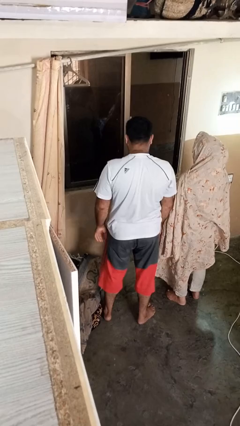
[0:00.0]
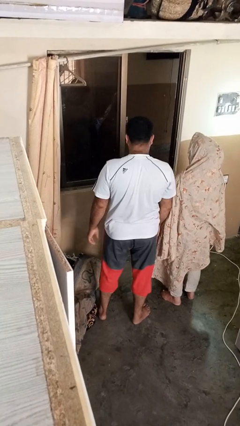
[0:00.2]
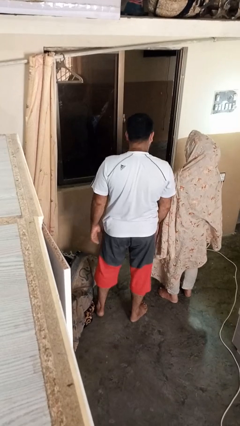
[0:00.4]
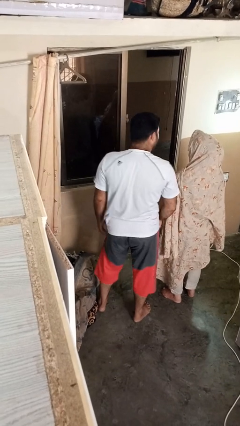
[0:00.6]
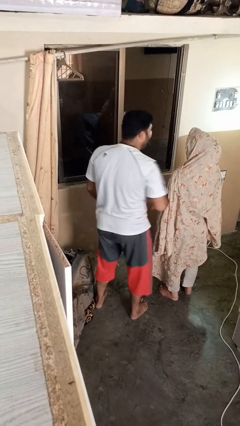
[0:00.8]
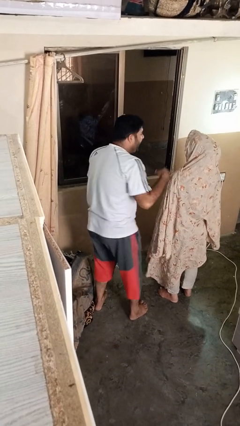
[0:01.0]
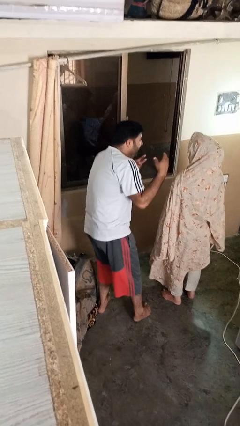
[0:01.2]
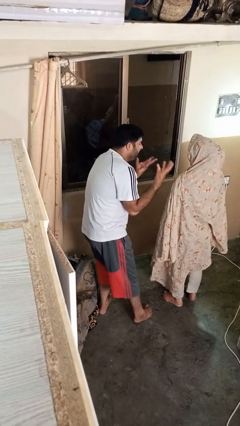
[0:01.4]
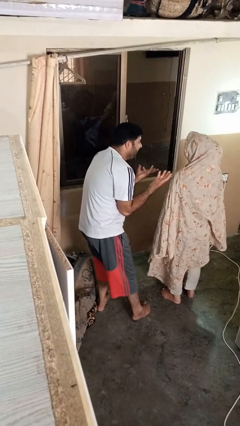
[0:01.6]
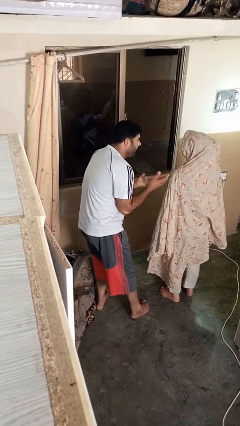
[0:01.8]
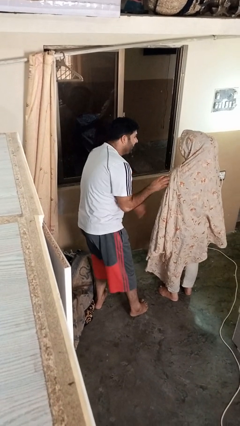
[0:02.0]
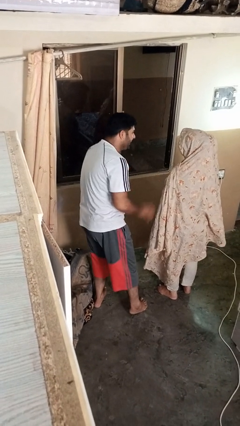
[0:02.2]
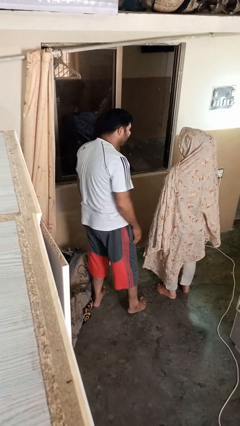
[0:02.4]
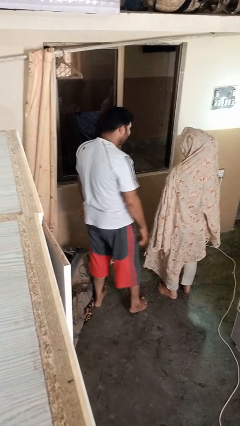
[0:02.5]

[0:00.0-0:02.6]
person laughs with person

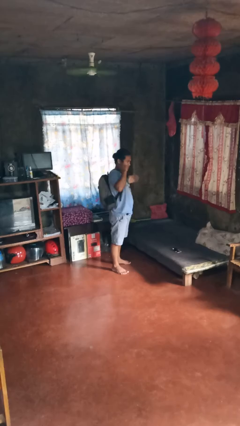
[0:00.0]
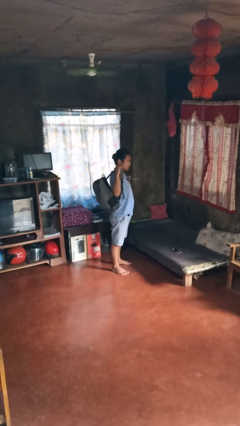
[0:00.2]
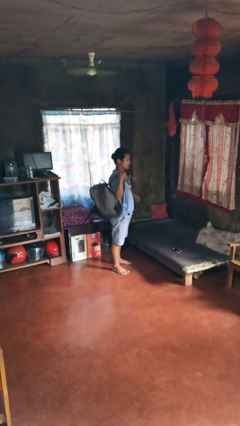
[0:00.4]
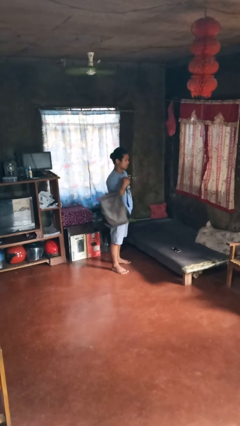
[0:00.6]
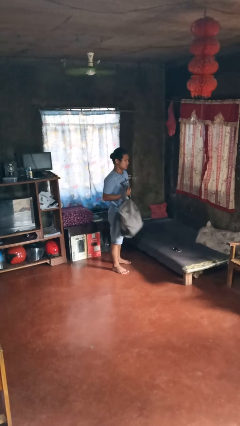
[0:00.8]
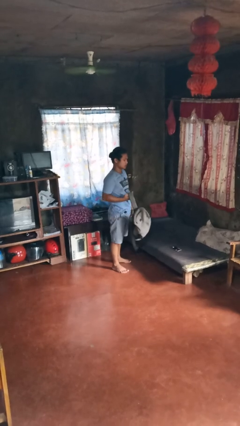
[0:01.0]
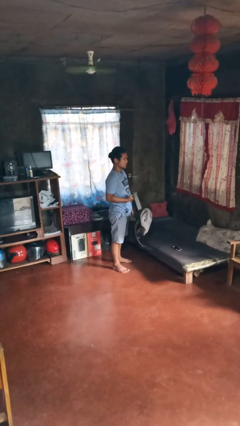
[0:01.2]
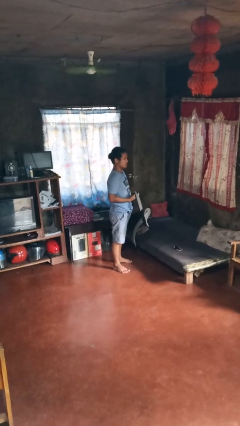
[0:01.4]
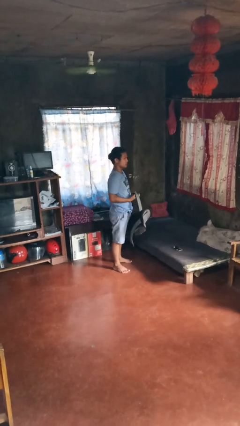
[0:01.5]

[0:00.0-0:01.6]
person takes off backpack

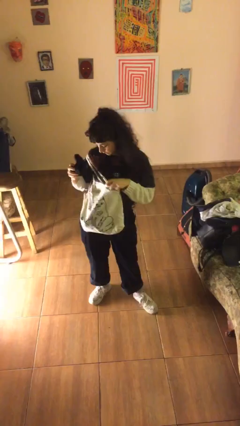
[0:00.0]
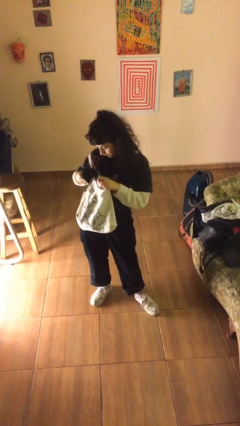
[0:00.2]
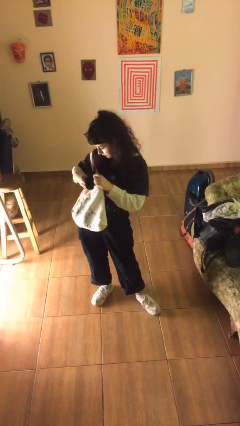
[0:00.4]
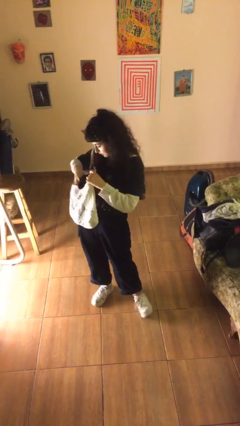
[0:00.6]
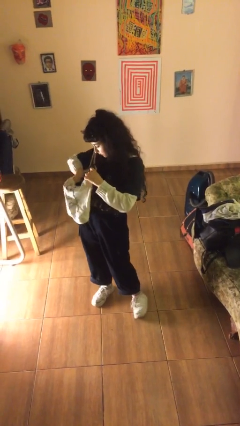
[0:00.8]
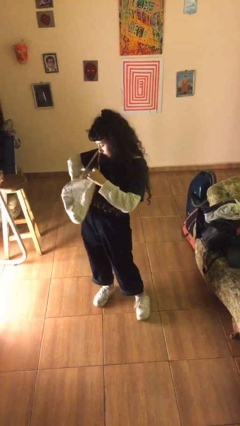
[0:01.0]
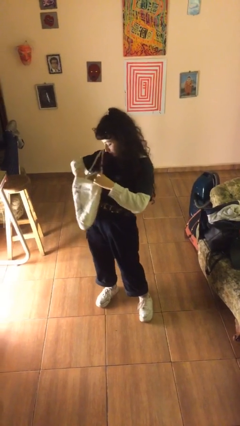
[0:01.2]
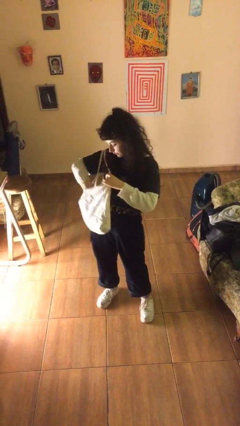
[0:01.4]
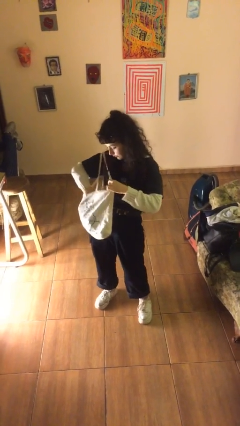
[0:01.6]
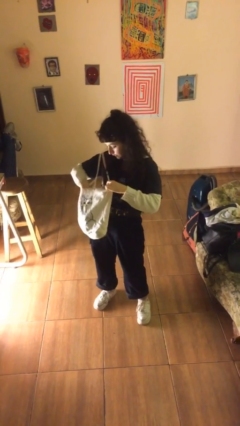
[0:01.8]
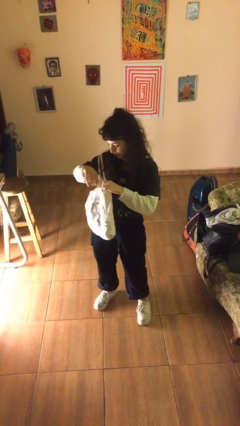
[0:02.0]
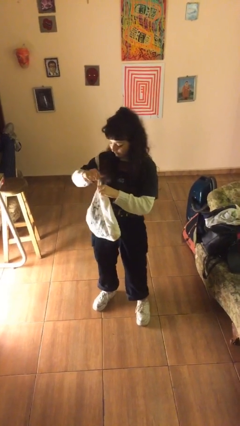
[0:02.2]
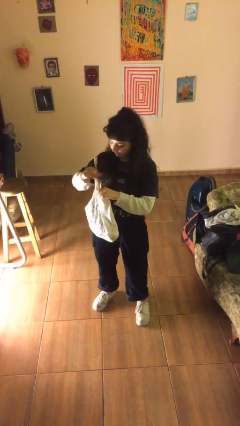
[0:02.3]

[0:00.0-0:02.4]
person puts object into purse

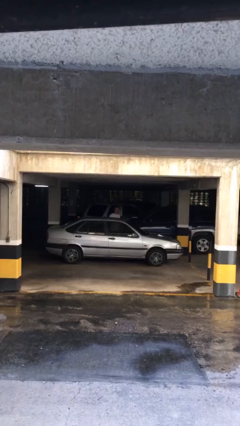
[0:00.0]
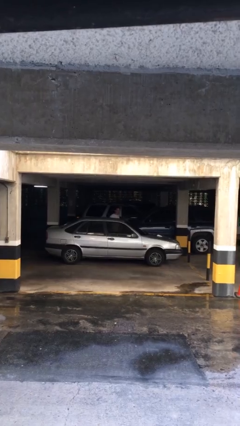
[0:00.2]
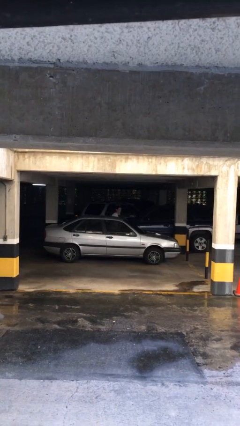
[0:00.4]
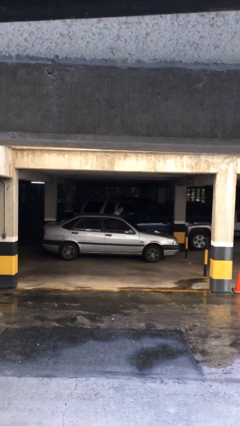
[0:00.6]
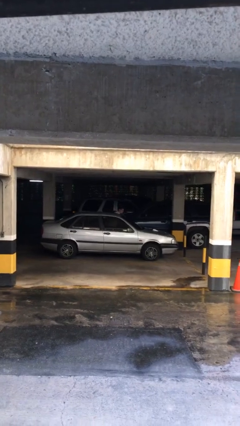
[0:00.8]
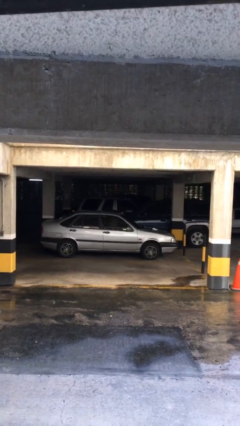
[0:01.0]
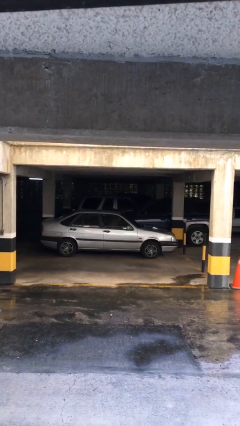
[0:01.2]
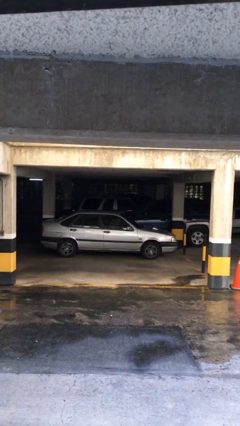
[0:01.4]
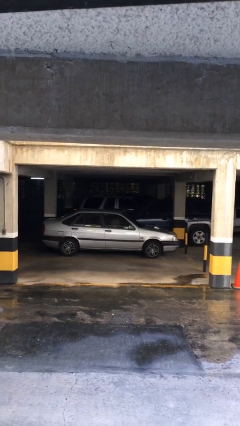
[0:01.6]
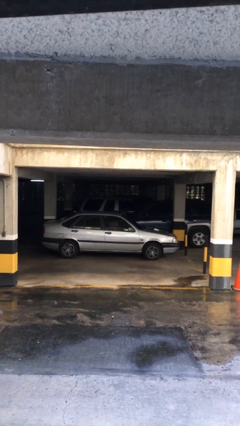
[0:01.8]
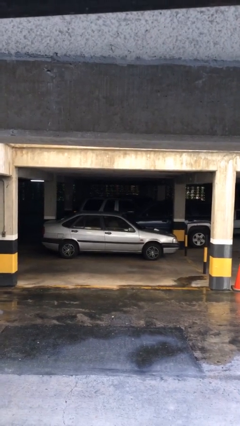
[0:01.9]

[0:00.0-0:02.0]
person enters car

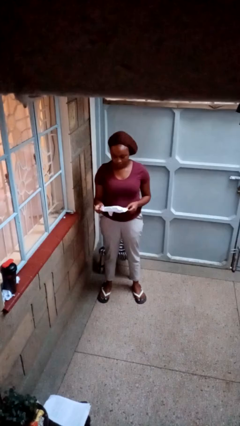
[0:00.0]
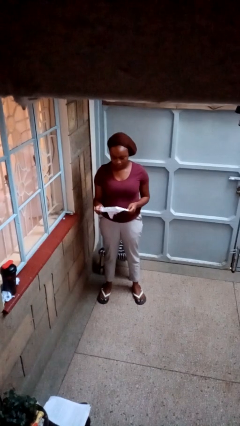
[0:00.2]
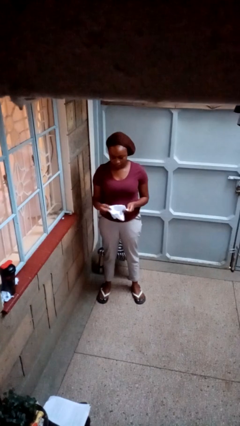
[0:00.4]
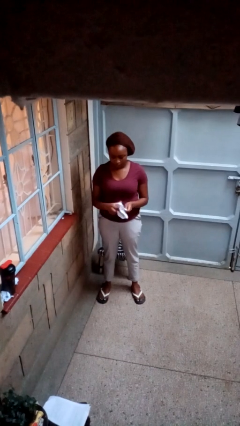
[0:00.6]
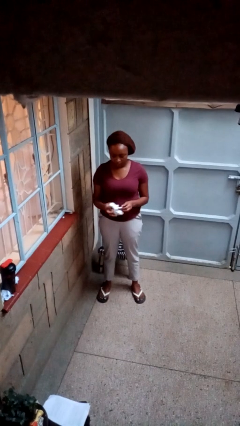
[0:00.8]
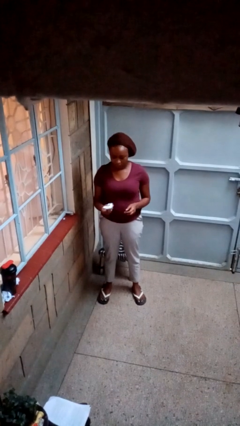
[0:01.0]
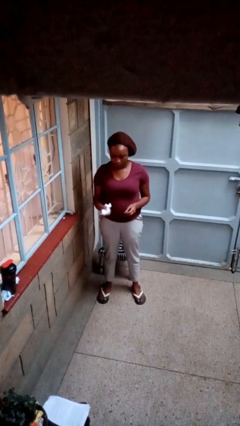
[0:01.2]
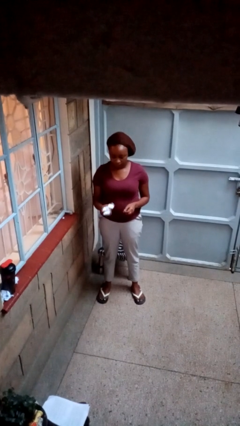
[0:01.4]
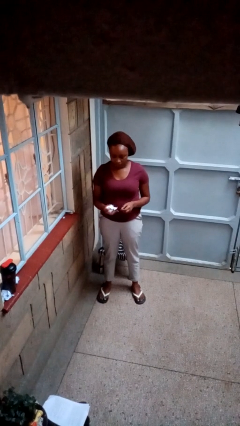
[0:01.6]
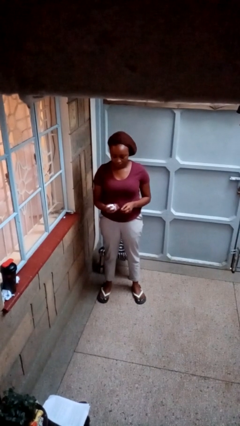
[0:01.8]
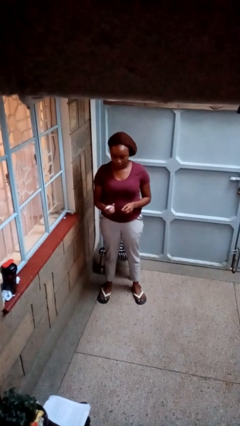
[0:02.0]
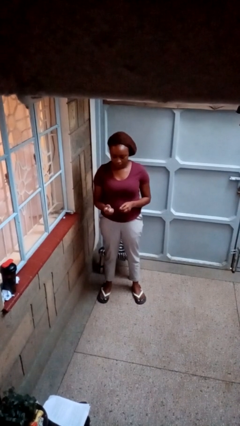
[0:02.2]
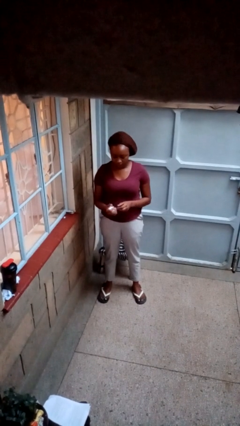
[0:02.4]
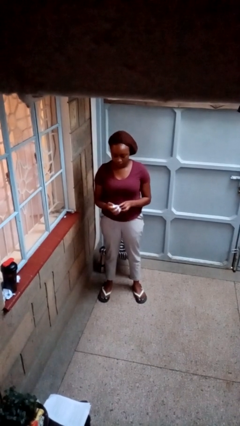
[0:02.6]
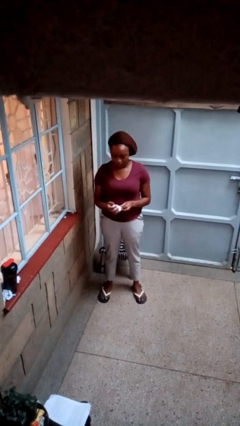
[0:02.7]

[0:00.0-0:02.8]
person crumples paper

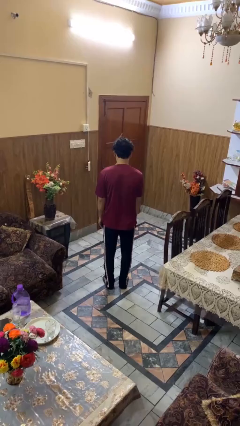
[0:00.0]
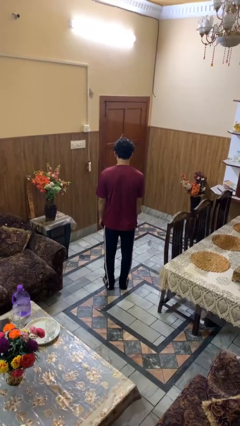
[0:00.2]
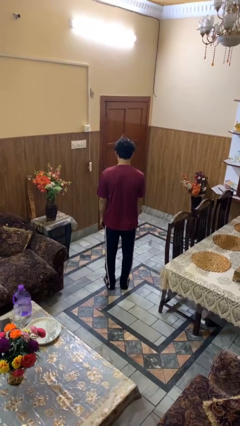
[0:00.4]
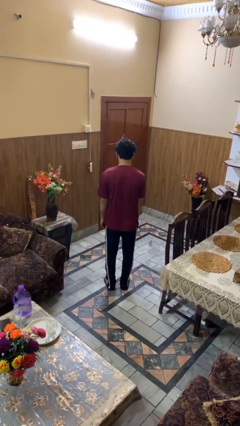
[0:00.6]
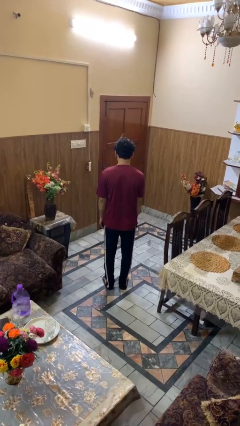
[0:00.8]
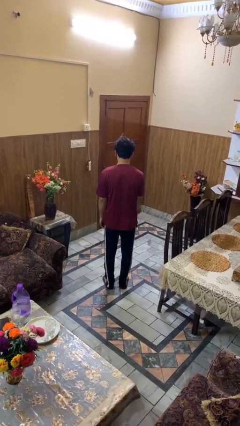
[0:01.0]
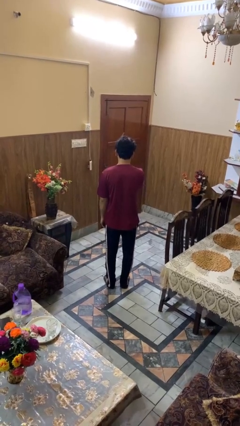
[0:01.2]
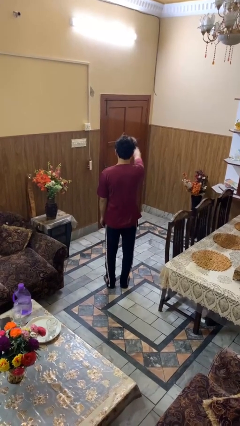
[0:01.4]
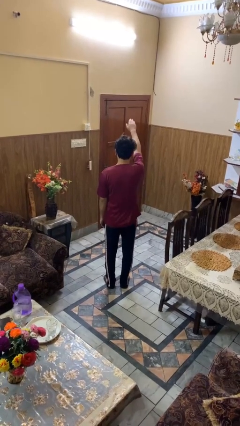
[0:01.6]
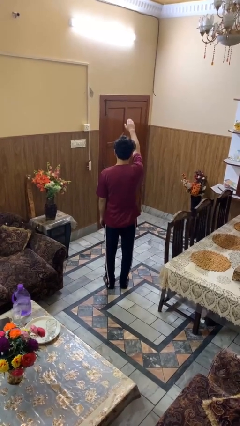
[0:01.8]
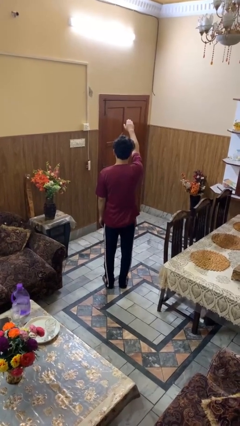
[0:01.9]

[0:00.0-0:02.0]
person gestures swipe up

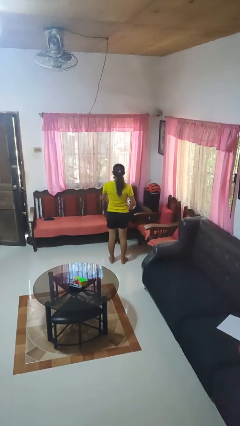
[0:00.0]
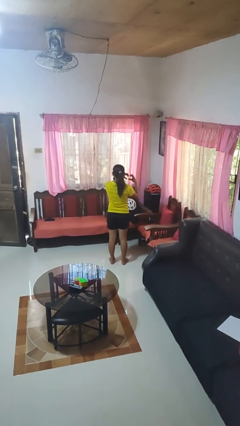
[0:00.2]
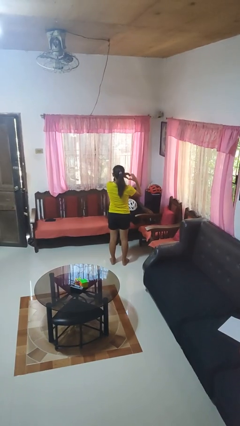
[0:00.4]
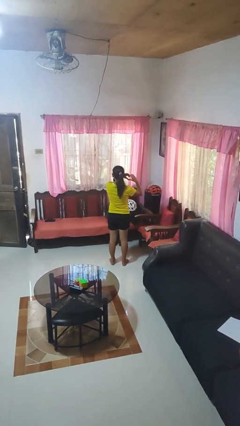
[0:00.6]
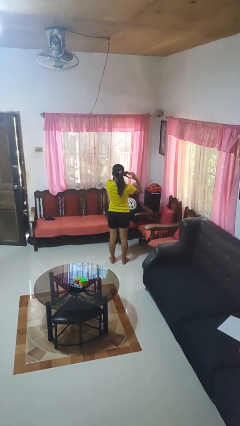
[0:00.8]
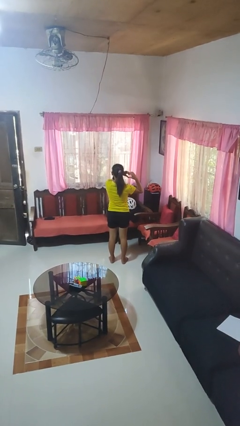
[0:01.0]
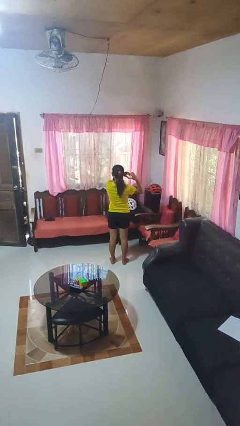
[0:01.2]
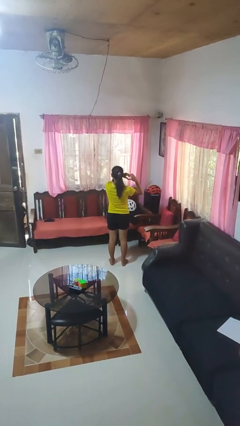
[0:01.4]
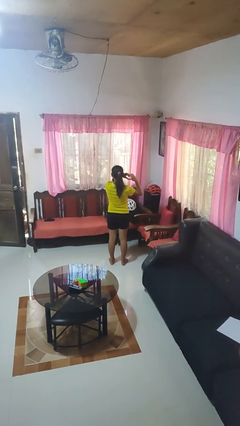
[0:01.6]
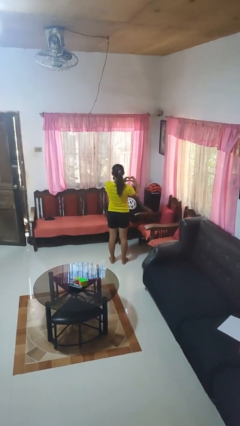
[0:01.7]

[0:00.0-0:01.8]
person gestures heart

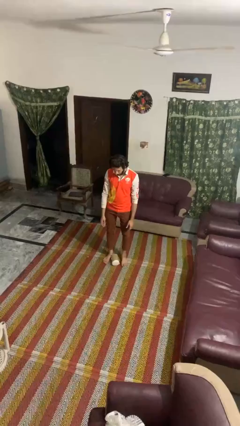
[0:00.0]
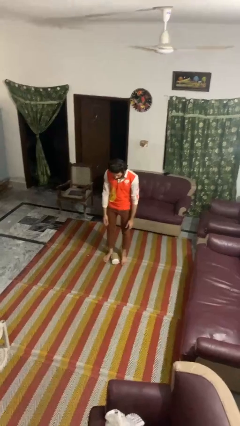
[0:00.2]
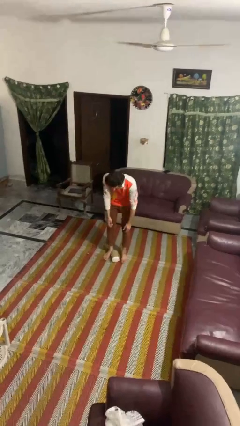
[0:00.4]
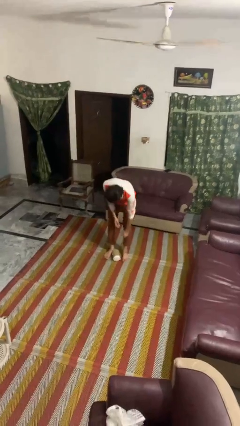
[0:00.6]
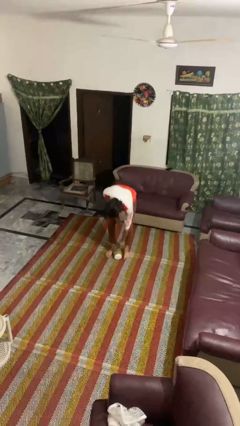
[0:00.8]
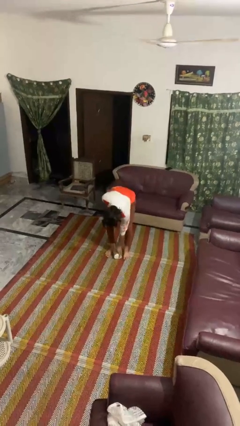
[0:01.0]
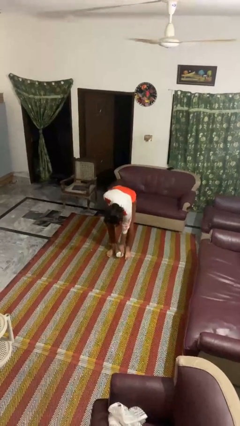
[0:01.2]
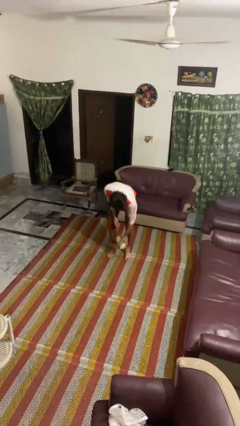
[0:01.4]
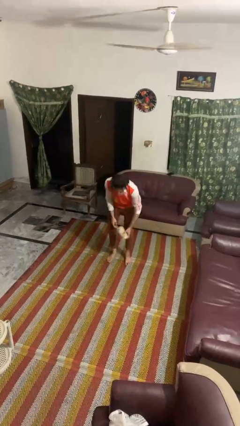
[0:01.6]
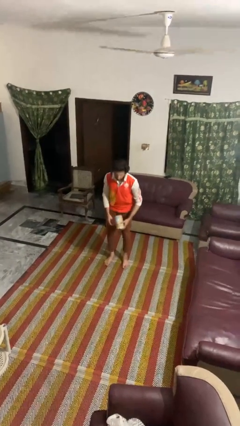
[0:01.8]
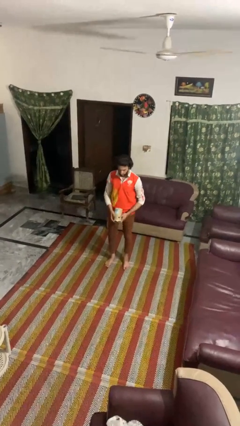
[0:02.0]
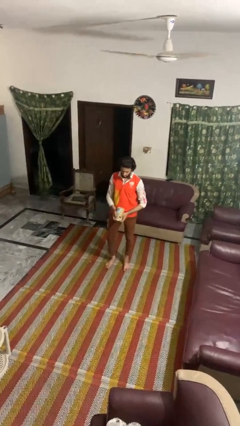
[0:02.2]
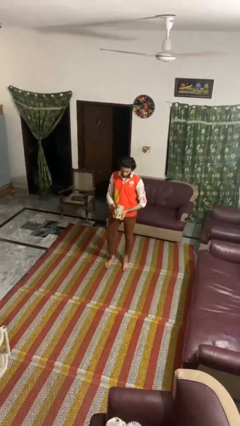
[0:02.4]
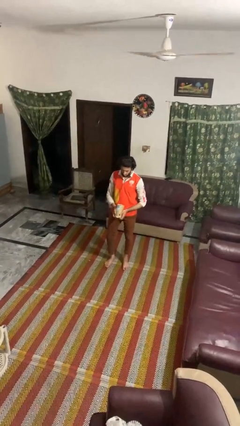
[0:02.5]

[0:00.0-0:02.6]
person picks up object from floor
